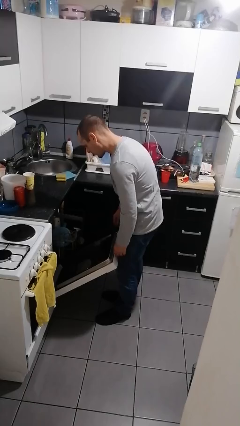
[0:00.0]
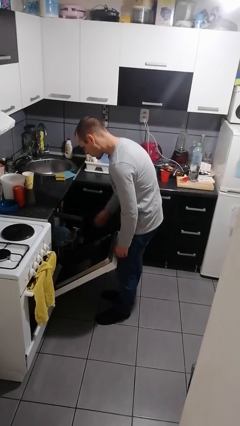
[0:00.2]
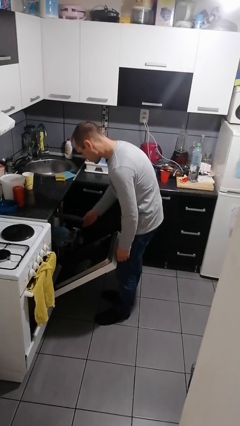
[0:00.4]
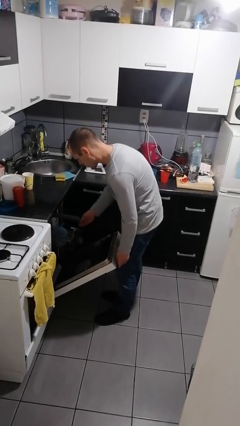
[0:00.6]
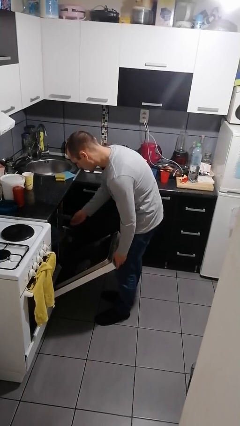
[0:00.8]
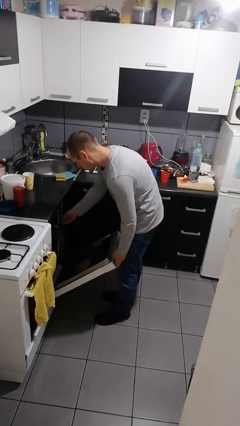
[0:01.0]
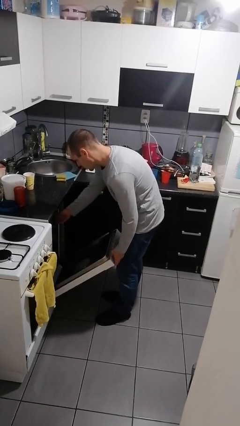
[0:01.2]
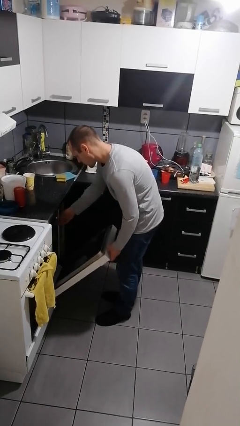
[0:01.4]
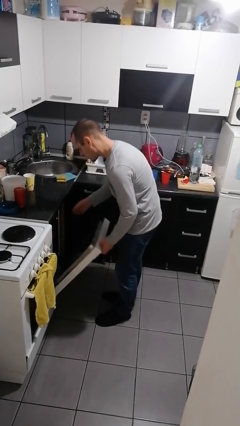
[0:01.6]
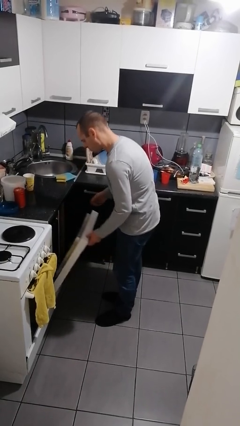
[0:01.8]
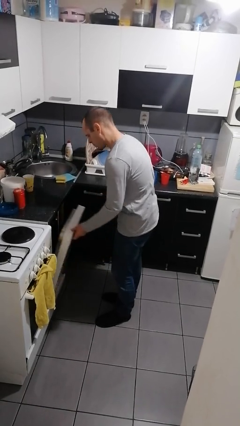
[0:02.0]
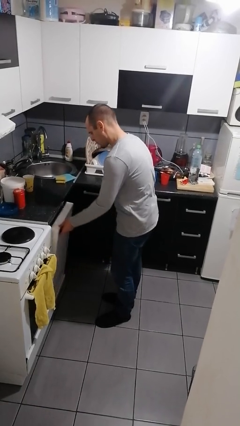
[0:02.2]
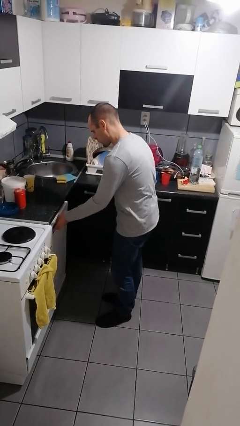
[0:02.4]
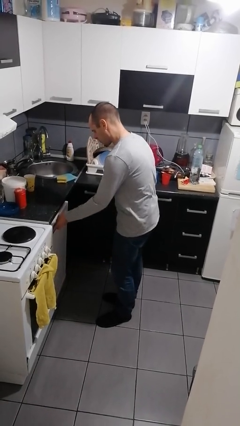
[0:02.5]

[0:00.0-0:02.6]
person closes dishwasher

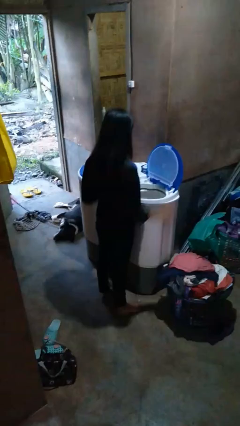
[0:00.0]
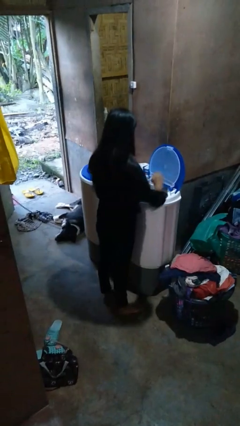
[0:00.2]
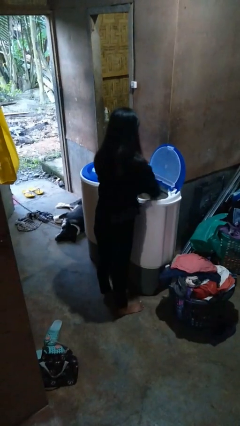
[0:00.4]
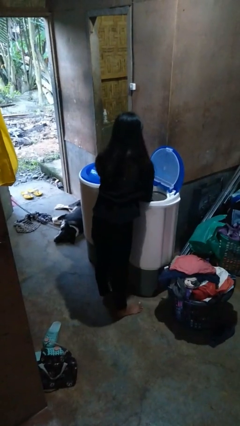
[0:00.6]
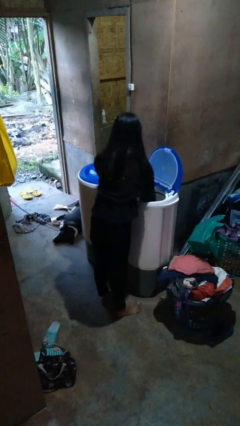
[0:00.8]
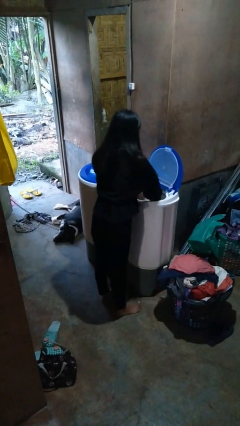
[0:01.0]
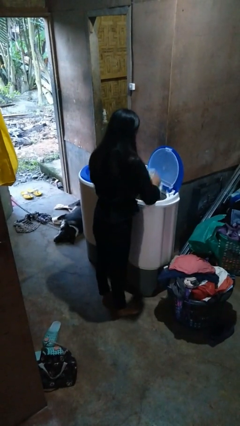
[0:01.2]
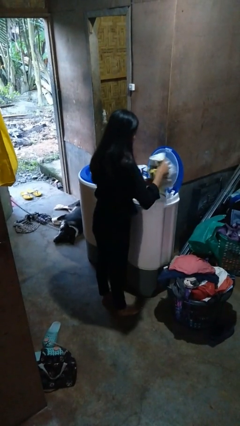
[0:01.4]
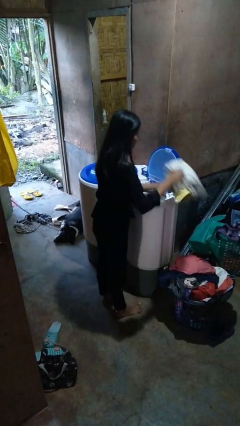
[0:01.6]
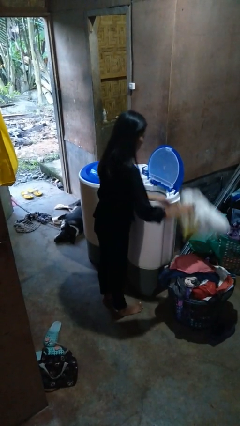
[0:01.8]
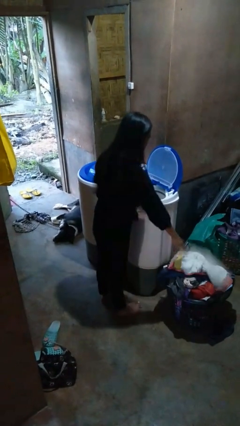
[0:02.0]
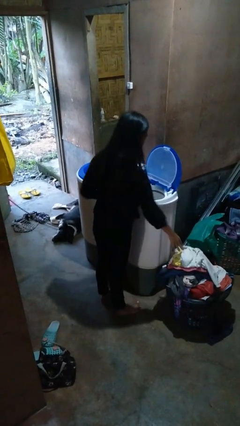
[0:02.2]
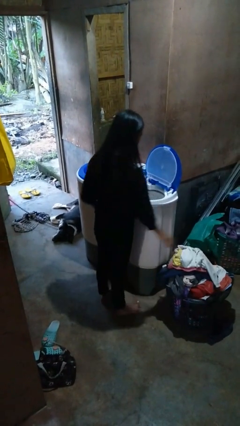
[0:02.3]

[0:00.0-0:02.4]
person unloads dryer

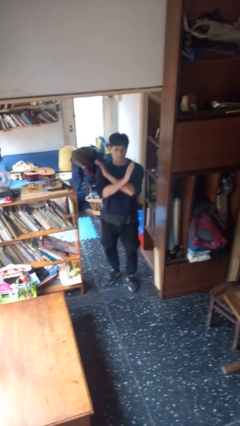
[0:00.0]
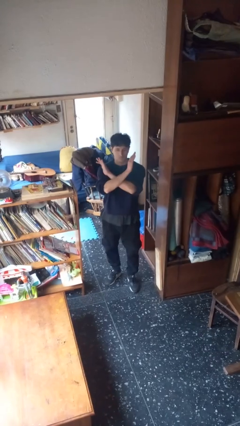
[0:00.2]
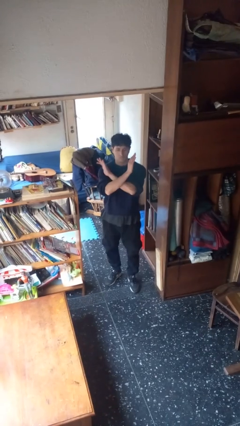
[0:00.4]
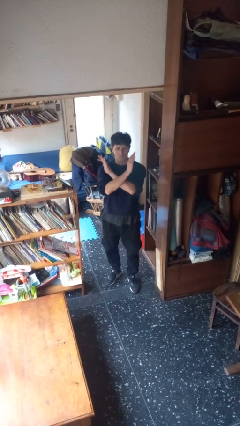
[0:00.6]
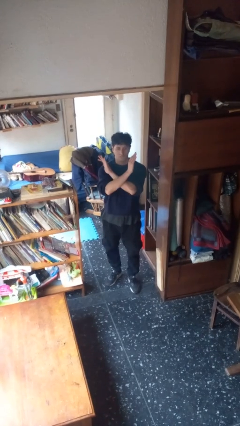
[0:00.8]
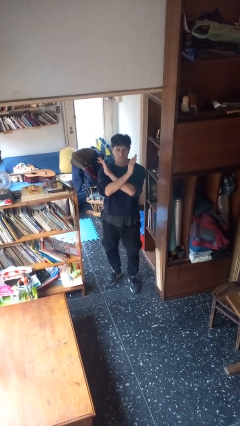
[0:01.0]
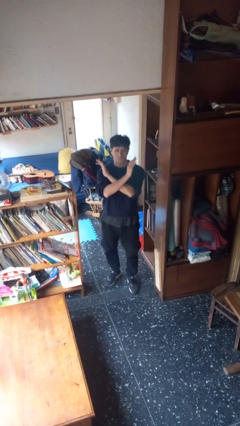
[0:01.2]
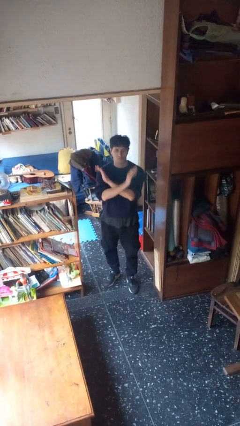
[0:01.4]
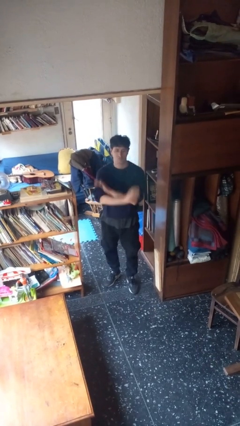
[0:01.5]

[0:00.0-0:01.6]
person gestures arms x

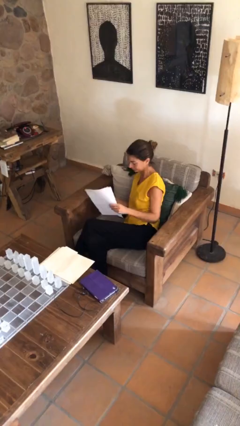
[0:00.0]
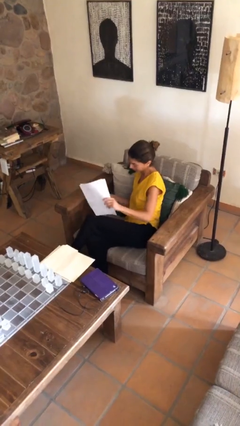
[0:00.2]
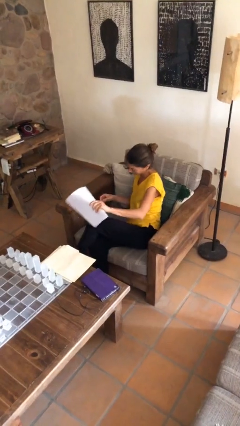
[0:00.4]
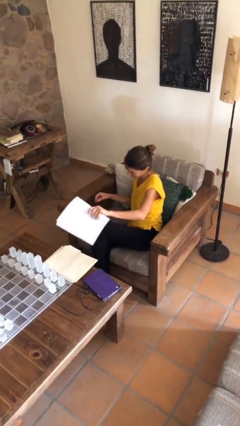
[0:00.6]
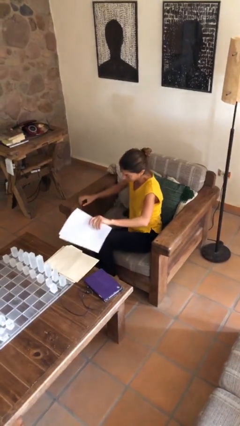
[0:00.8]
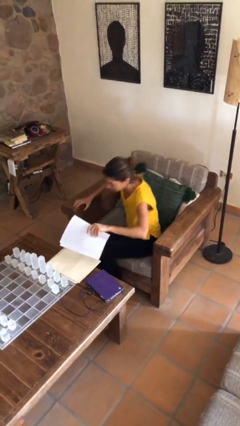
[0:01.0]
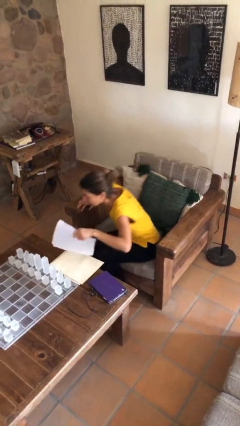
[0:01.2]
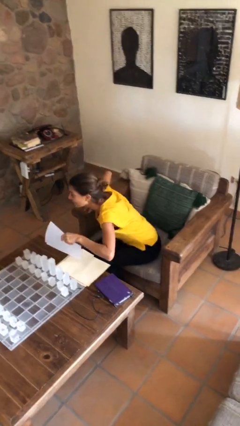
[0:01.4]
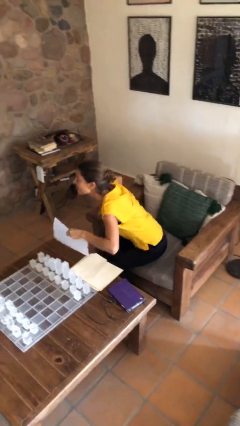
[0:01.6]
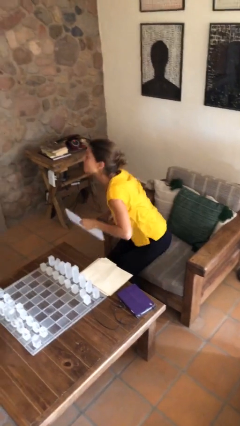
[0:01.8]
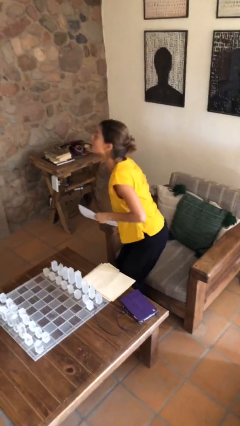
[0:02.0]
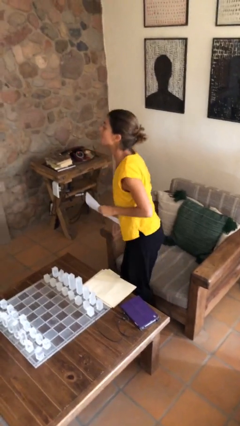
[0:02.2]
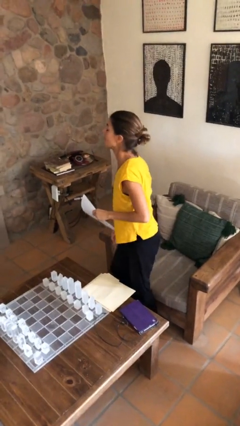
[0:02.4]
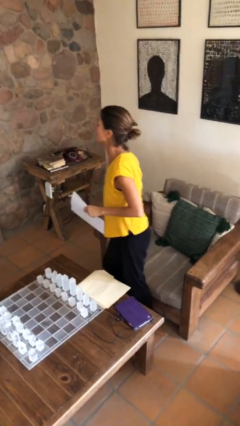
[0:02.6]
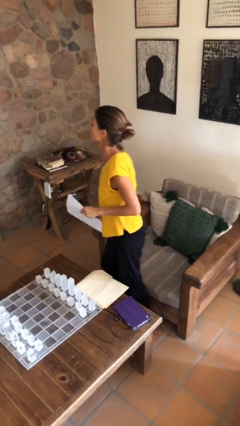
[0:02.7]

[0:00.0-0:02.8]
person stands up

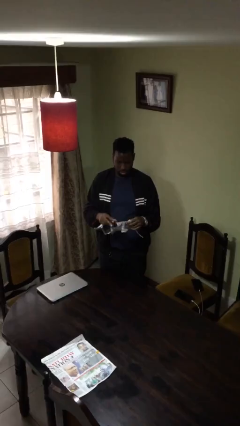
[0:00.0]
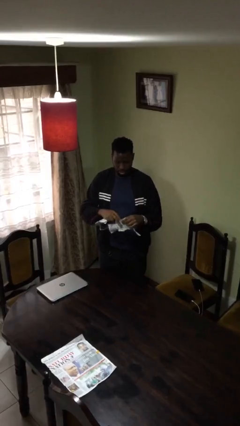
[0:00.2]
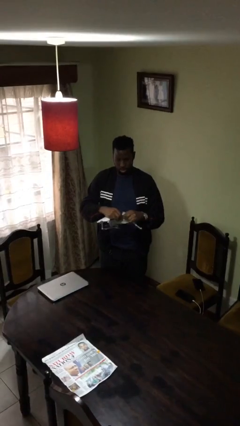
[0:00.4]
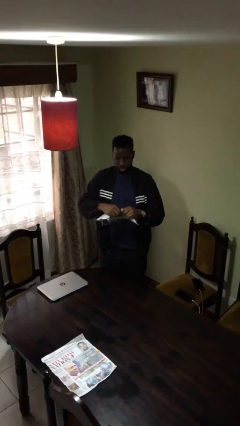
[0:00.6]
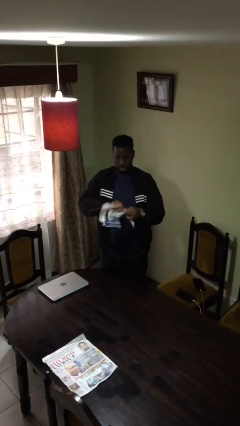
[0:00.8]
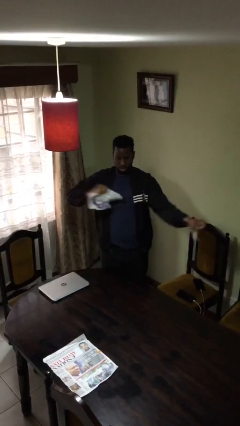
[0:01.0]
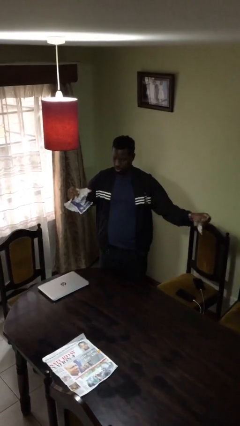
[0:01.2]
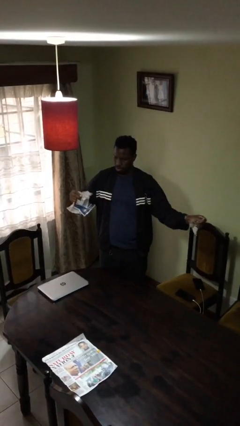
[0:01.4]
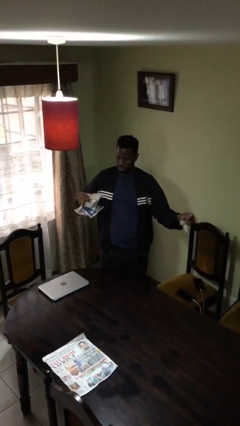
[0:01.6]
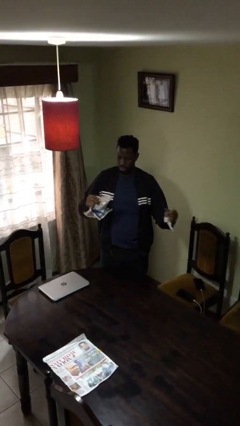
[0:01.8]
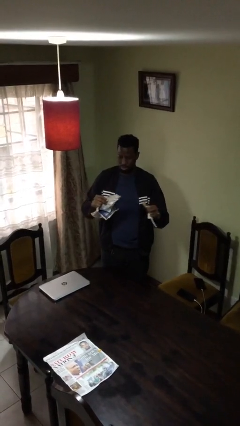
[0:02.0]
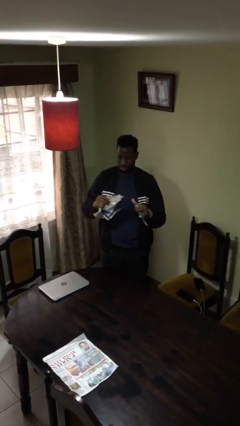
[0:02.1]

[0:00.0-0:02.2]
person tears paper

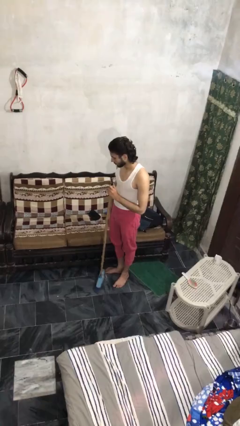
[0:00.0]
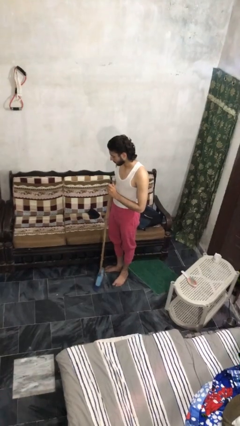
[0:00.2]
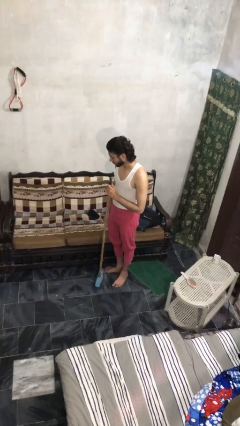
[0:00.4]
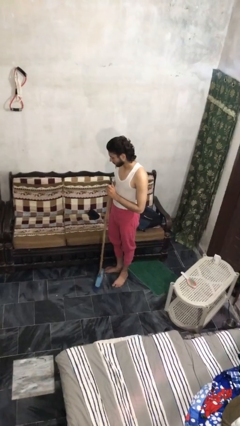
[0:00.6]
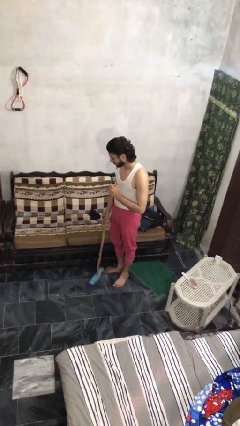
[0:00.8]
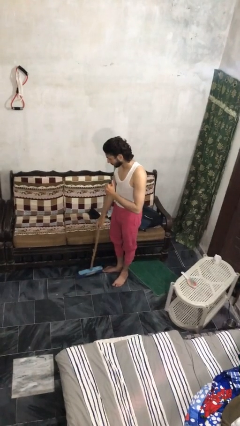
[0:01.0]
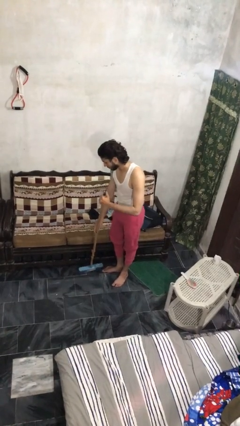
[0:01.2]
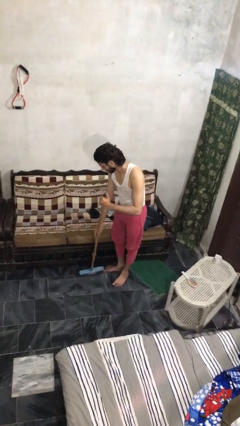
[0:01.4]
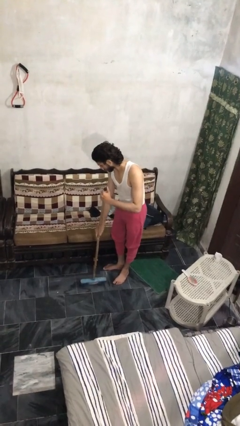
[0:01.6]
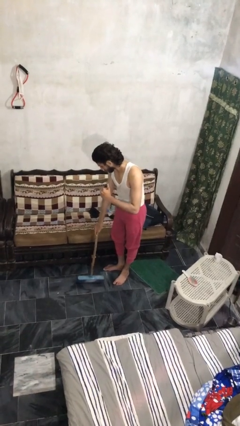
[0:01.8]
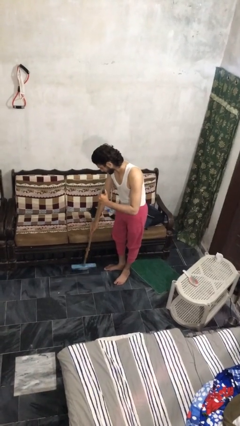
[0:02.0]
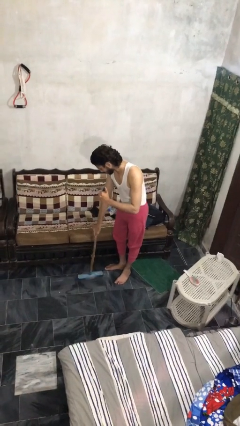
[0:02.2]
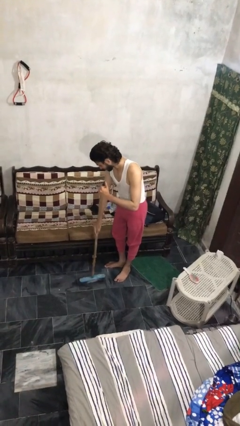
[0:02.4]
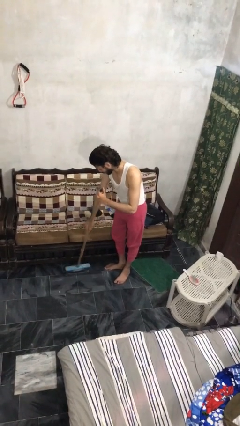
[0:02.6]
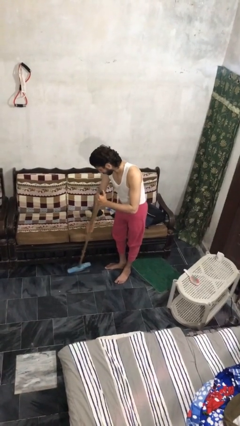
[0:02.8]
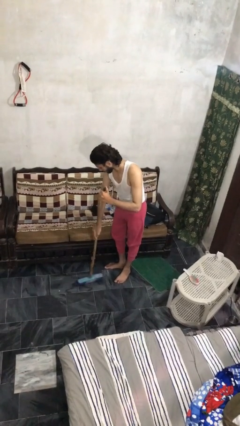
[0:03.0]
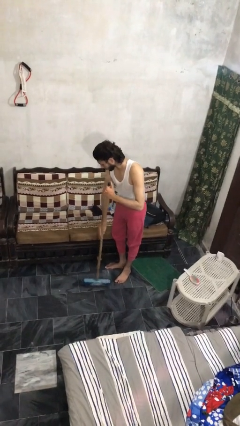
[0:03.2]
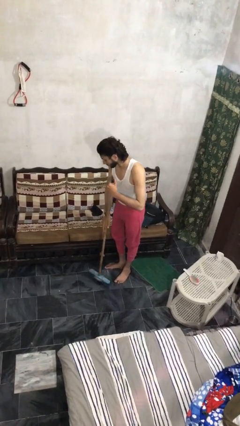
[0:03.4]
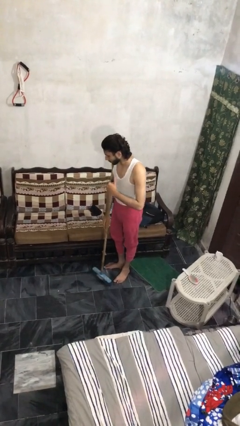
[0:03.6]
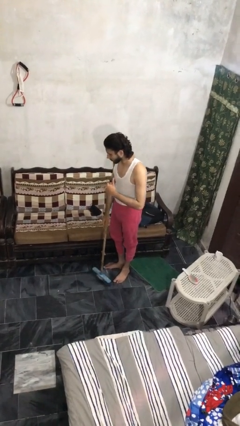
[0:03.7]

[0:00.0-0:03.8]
person sweeps floor

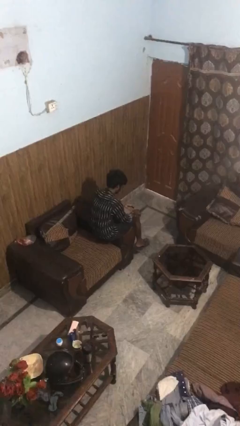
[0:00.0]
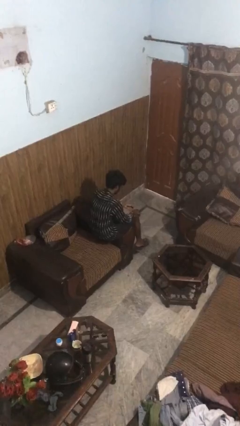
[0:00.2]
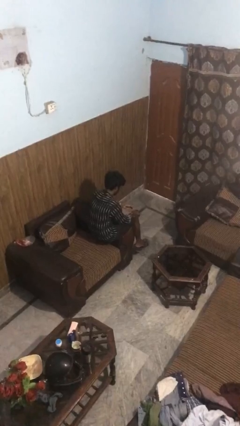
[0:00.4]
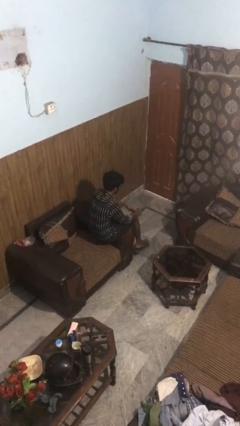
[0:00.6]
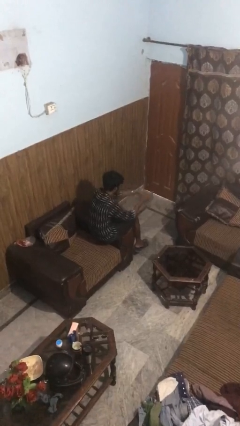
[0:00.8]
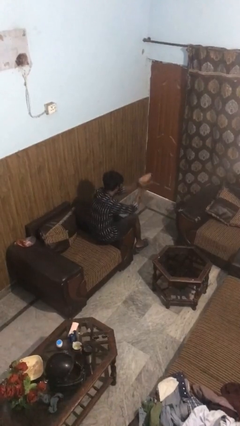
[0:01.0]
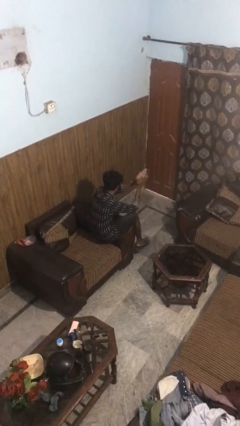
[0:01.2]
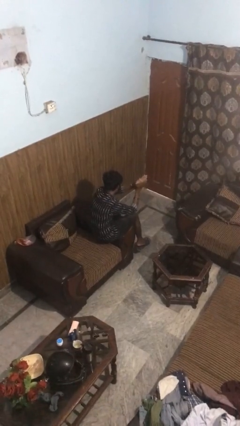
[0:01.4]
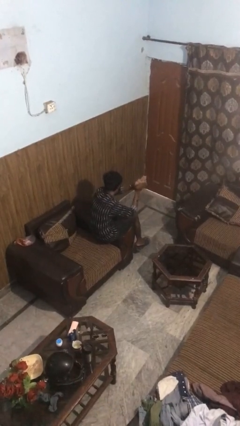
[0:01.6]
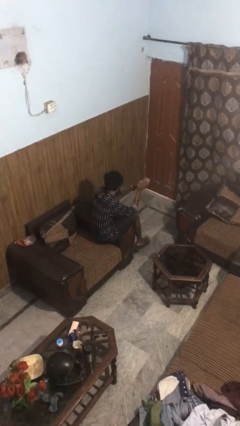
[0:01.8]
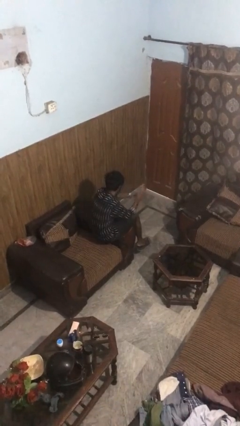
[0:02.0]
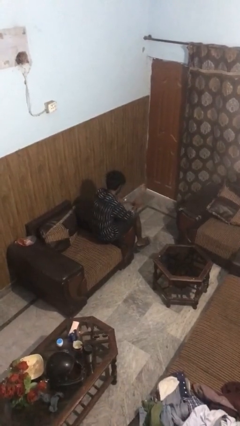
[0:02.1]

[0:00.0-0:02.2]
person claps hands
